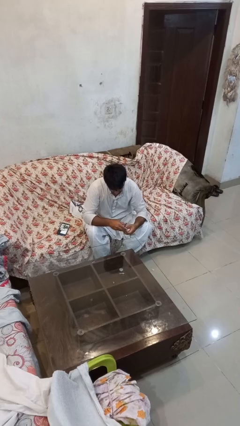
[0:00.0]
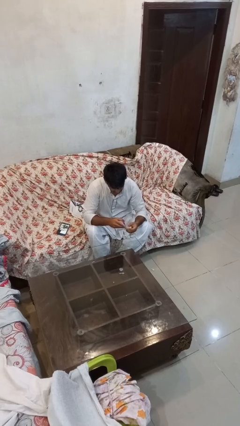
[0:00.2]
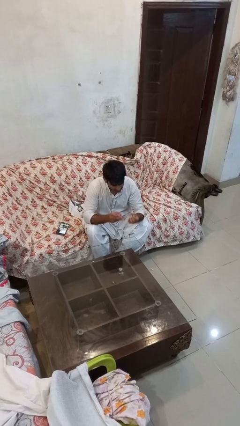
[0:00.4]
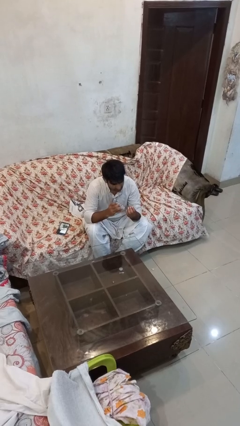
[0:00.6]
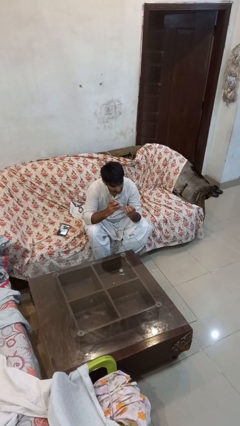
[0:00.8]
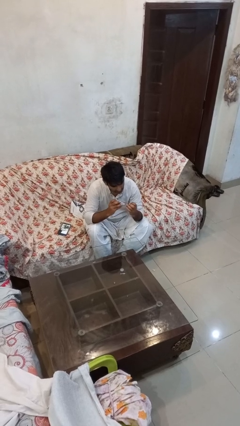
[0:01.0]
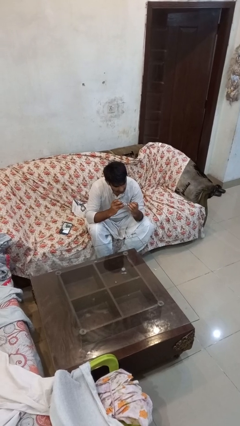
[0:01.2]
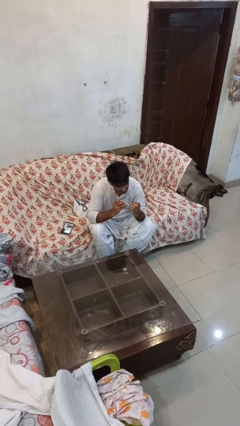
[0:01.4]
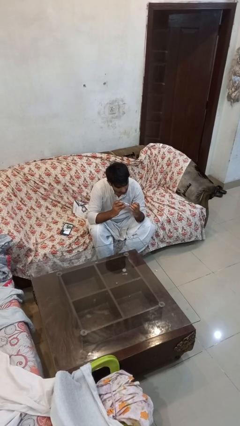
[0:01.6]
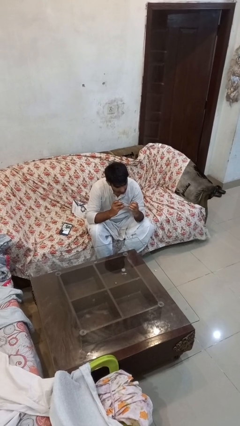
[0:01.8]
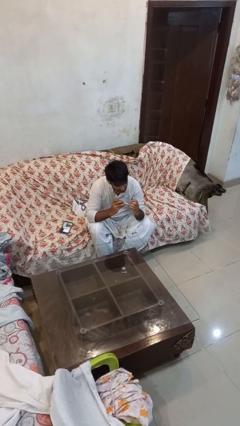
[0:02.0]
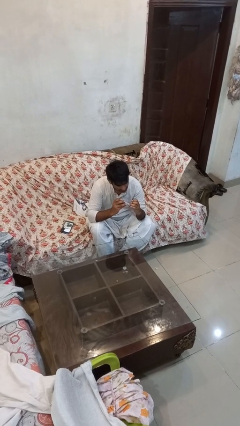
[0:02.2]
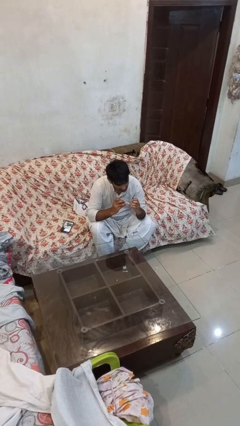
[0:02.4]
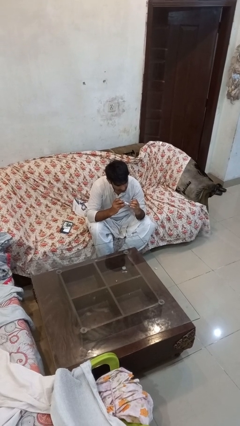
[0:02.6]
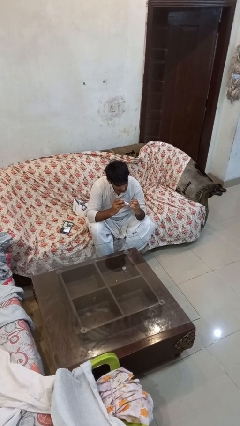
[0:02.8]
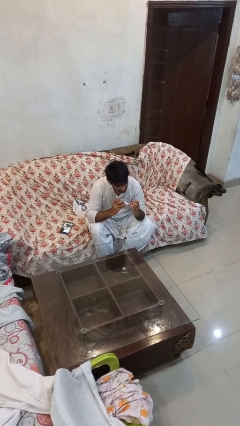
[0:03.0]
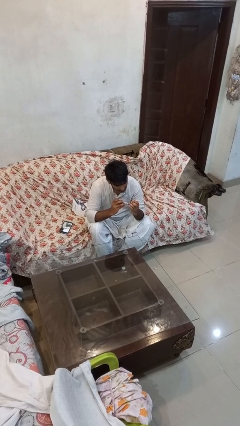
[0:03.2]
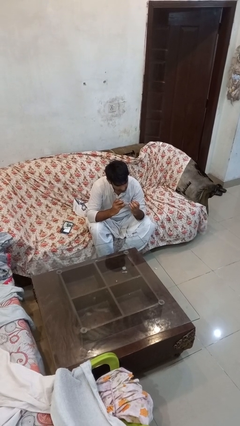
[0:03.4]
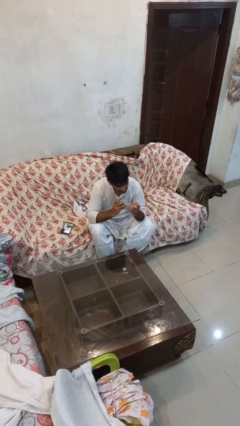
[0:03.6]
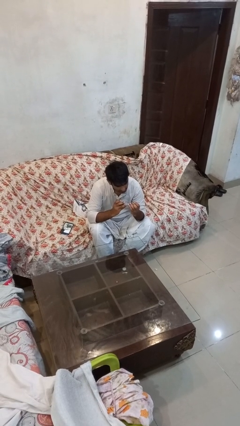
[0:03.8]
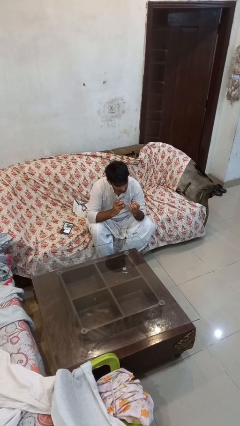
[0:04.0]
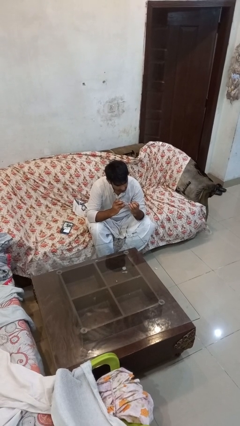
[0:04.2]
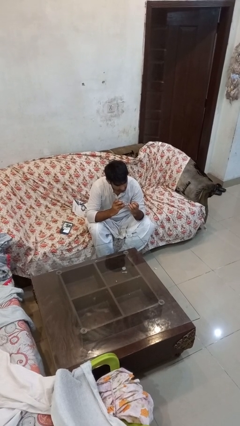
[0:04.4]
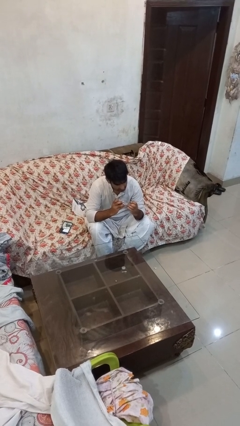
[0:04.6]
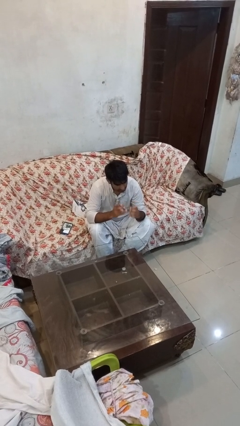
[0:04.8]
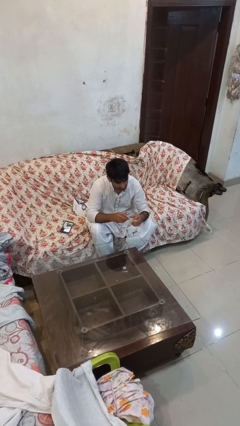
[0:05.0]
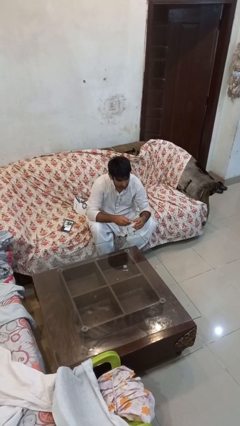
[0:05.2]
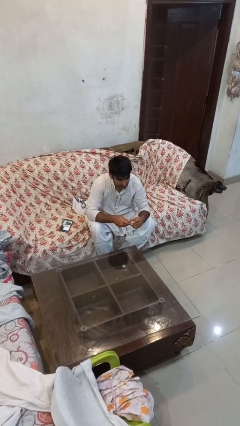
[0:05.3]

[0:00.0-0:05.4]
person clips fingernails

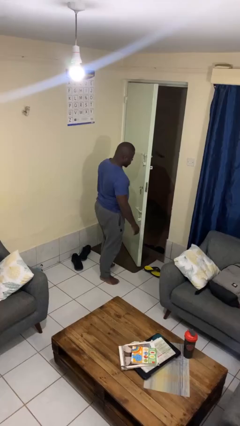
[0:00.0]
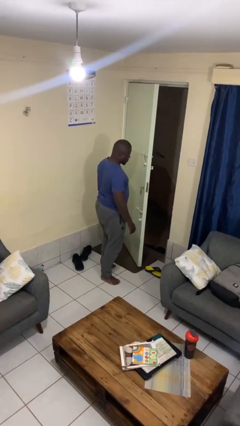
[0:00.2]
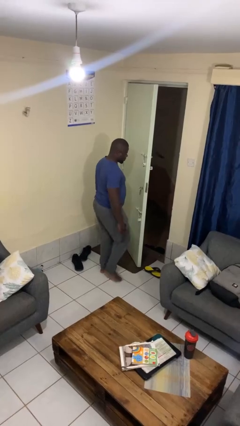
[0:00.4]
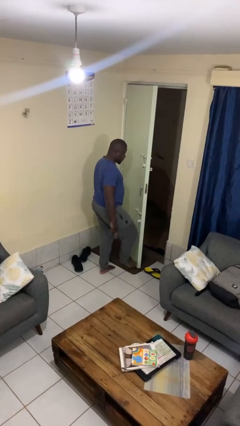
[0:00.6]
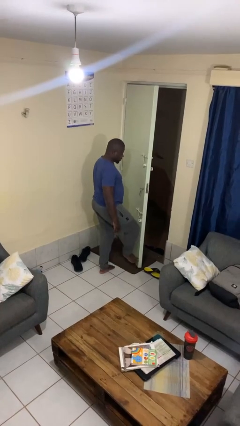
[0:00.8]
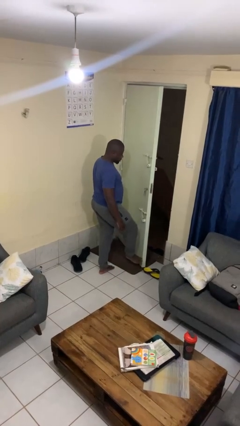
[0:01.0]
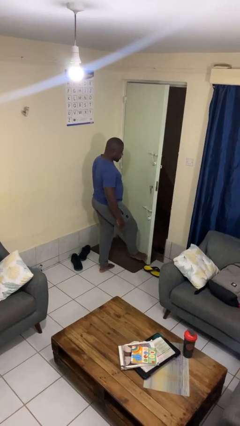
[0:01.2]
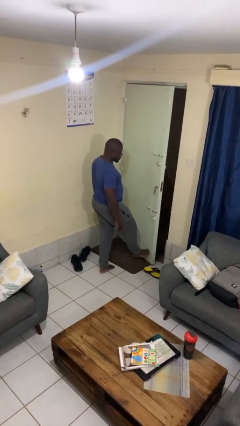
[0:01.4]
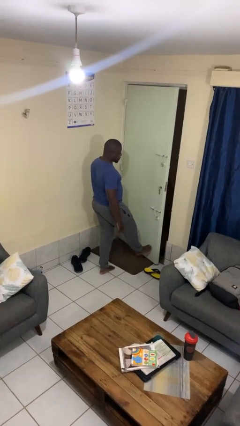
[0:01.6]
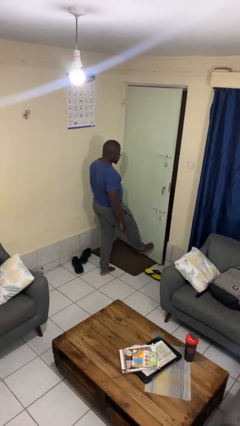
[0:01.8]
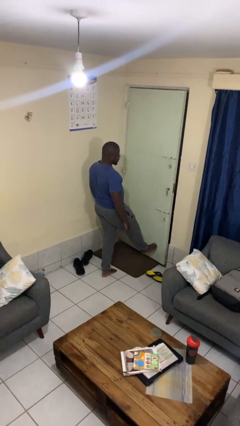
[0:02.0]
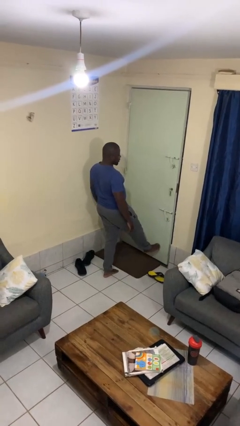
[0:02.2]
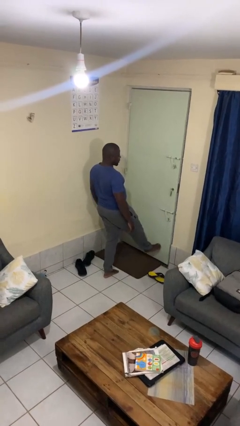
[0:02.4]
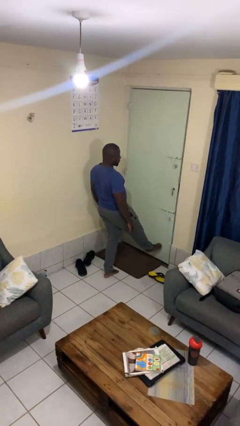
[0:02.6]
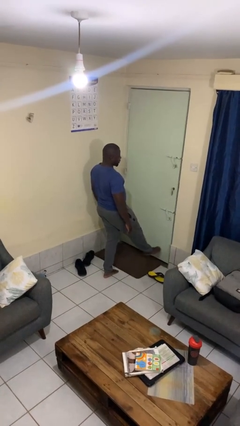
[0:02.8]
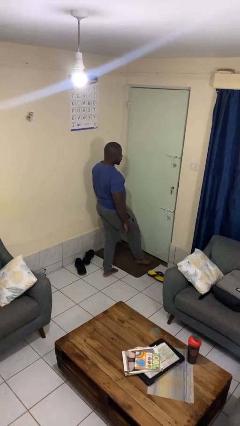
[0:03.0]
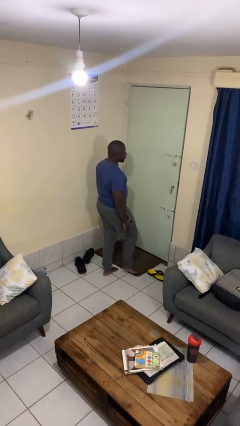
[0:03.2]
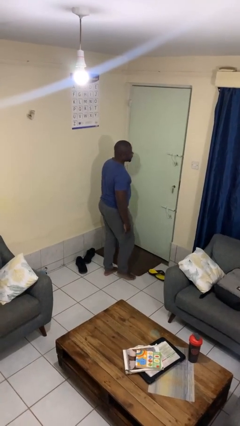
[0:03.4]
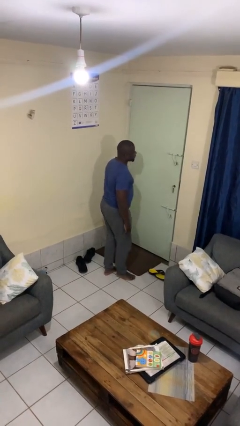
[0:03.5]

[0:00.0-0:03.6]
person closes door with foot

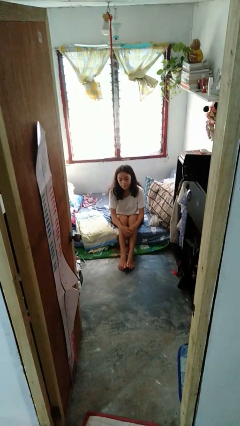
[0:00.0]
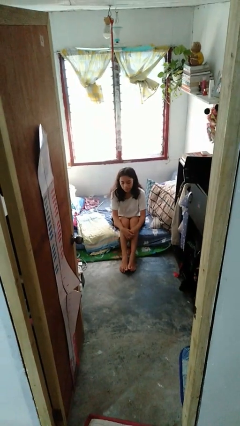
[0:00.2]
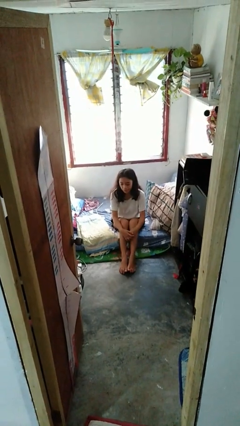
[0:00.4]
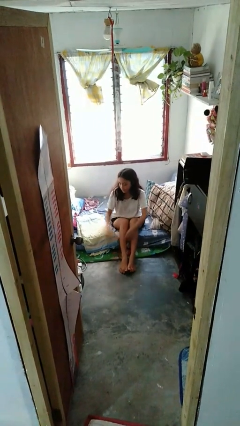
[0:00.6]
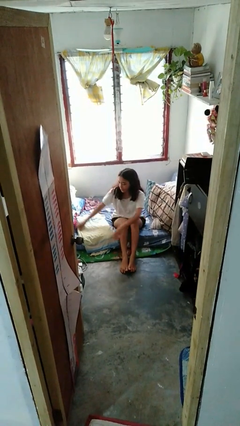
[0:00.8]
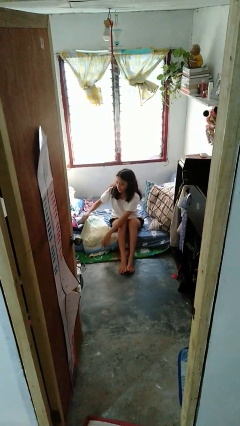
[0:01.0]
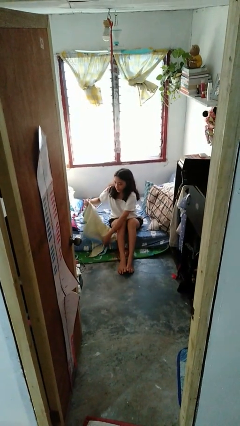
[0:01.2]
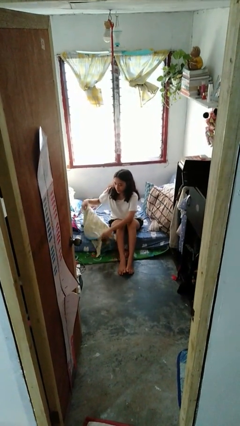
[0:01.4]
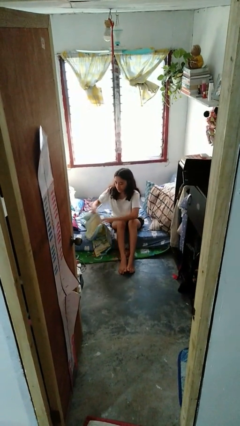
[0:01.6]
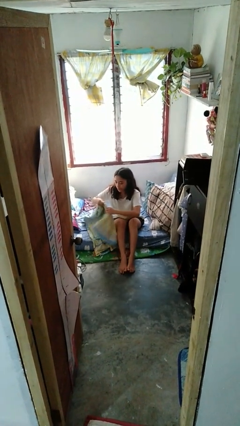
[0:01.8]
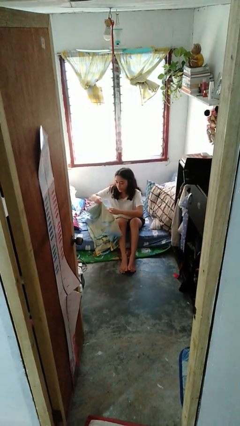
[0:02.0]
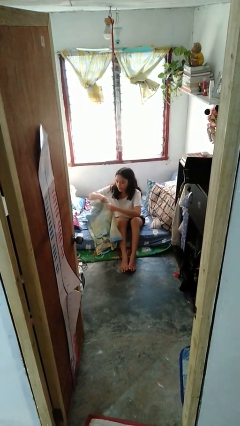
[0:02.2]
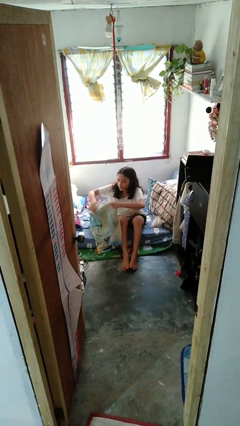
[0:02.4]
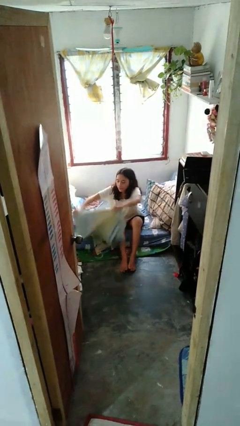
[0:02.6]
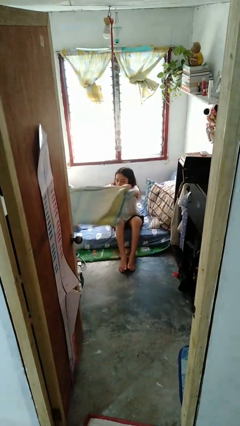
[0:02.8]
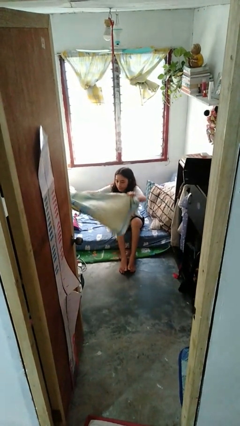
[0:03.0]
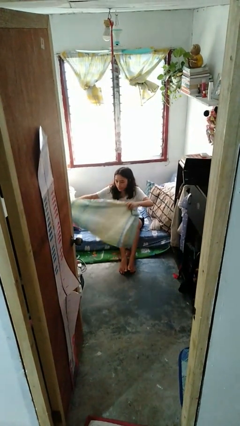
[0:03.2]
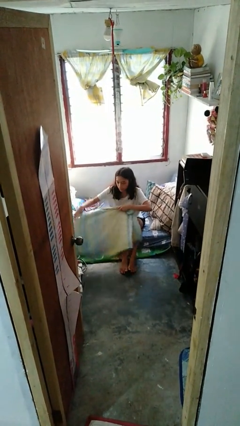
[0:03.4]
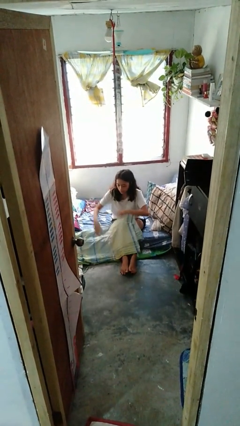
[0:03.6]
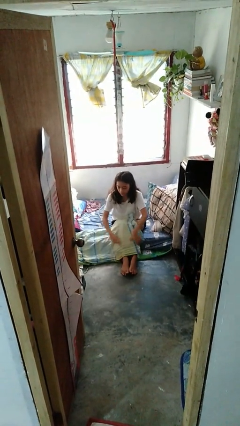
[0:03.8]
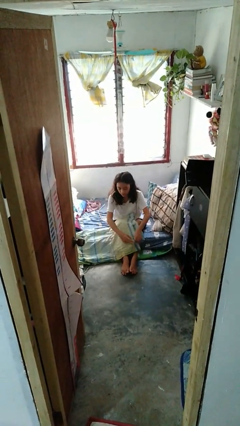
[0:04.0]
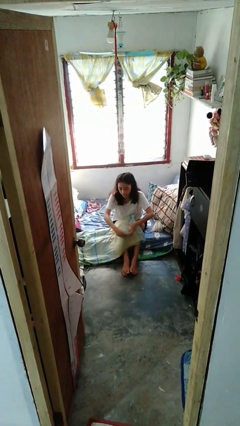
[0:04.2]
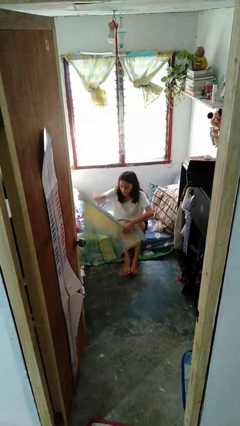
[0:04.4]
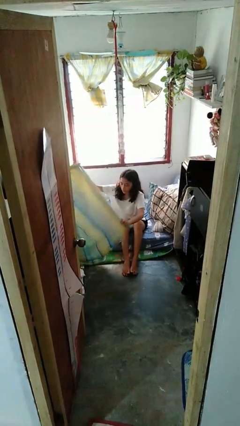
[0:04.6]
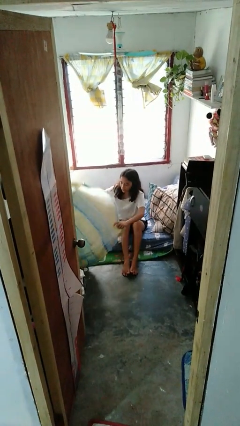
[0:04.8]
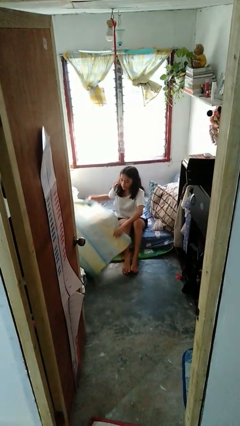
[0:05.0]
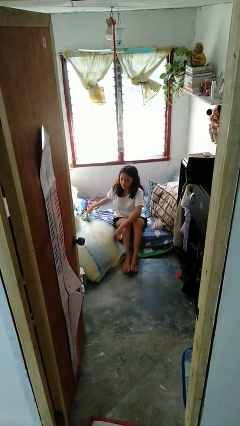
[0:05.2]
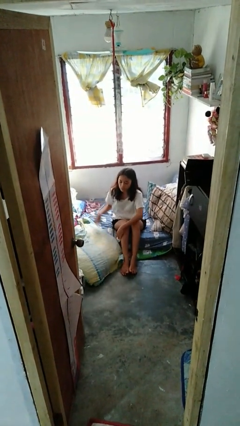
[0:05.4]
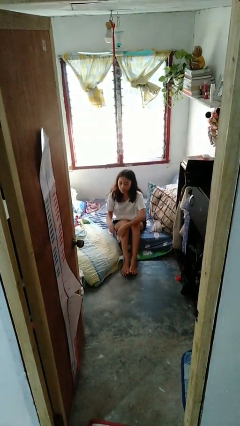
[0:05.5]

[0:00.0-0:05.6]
person unfolds blanket

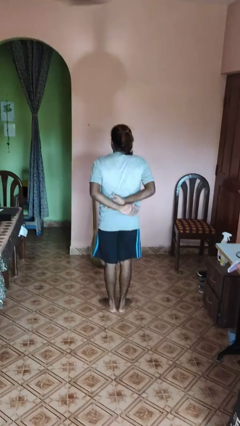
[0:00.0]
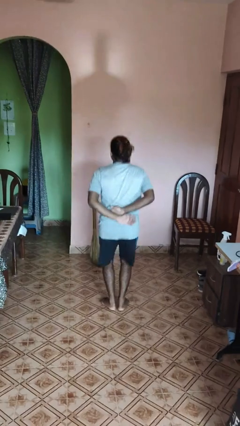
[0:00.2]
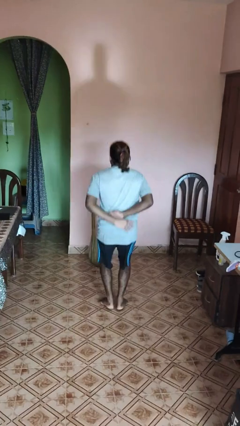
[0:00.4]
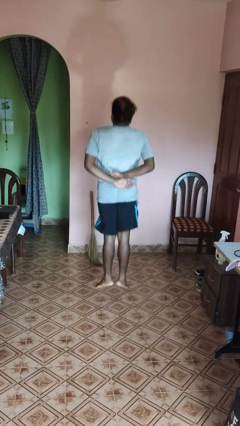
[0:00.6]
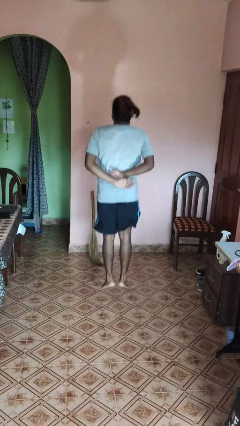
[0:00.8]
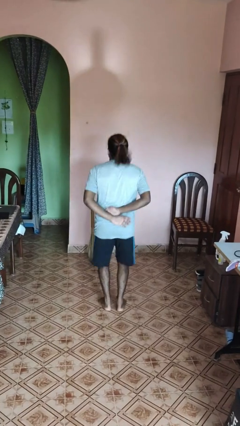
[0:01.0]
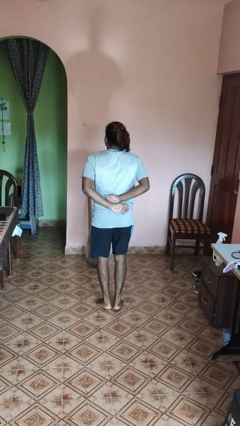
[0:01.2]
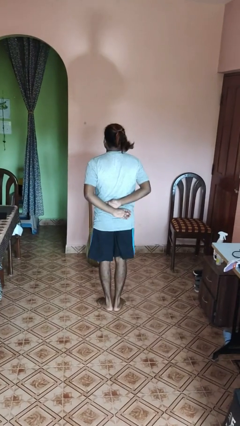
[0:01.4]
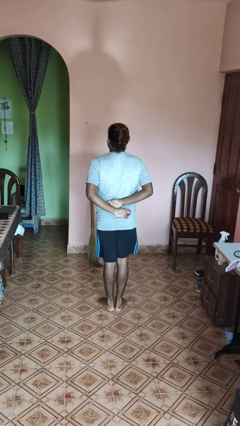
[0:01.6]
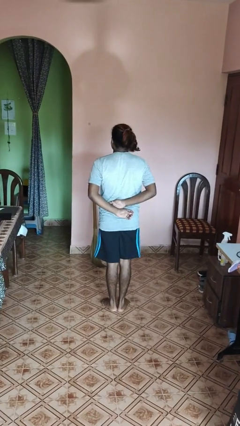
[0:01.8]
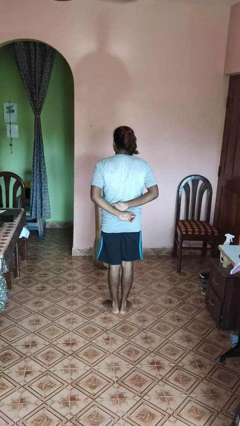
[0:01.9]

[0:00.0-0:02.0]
person jumps

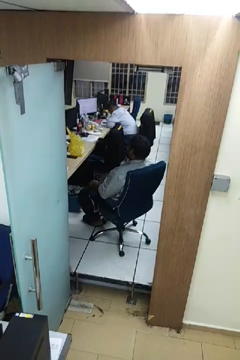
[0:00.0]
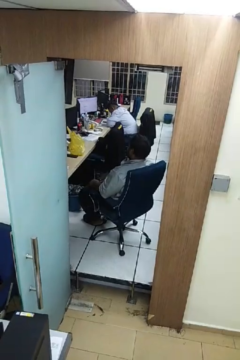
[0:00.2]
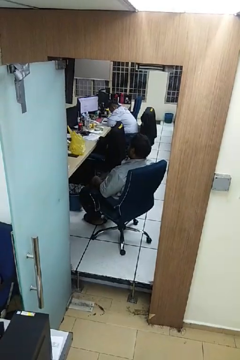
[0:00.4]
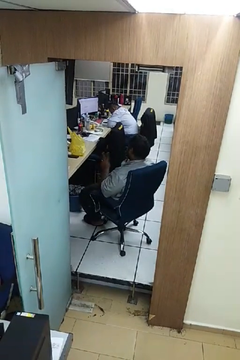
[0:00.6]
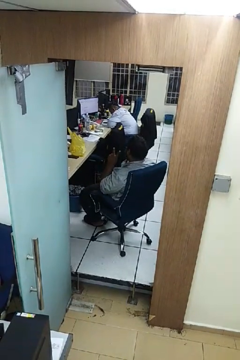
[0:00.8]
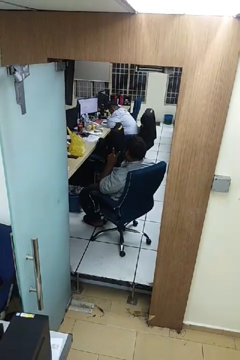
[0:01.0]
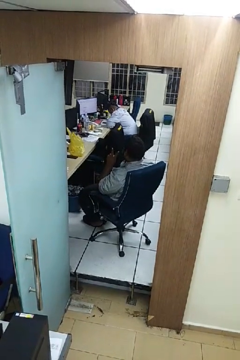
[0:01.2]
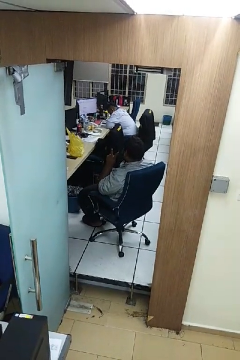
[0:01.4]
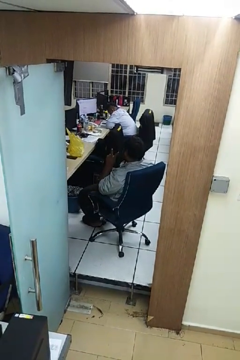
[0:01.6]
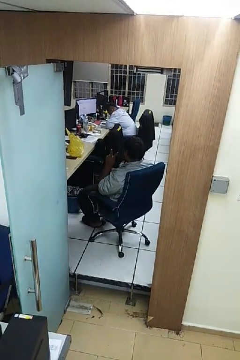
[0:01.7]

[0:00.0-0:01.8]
person gestures peace
